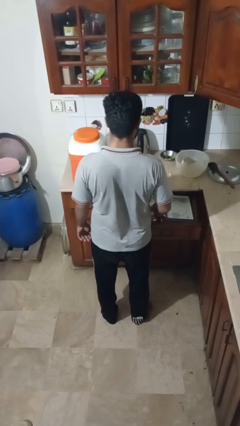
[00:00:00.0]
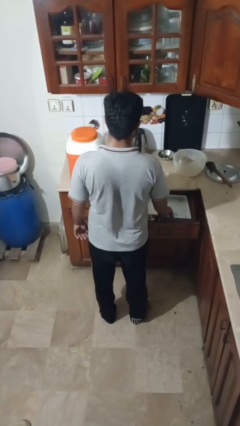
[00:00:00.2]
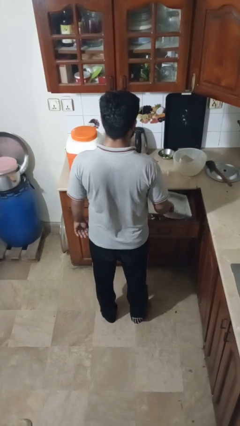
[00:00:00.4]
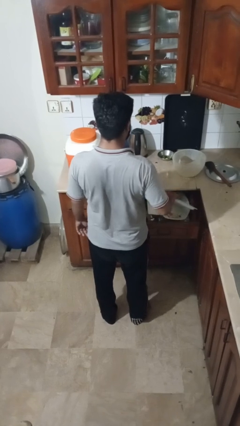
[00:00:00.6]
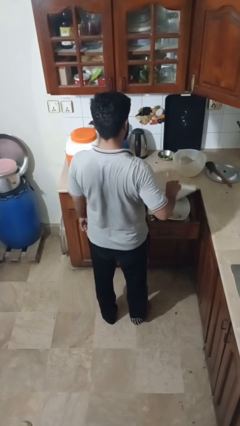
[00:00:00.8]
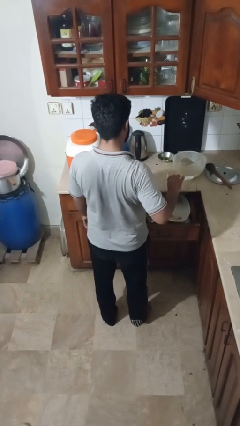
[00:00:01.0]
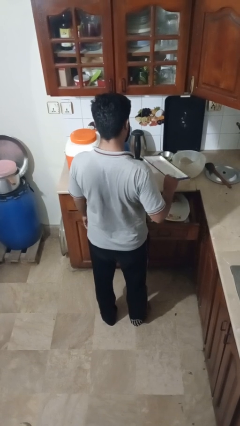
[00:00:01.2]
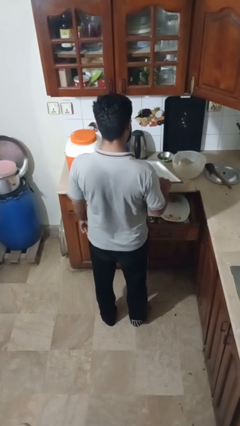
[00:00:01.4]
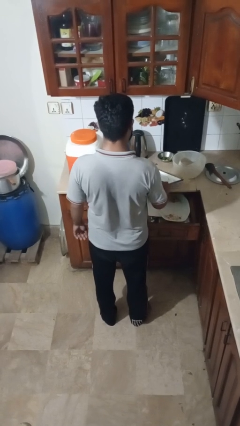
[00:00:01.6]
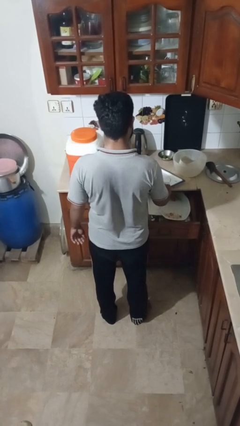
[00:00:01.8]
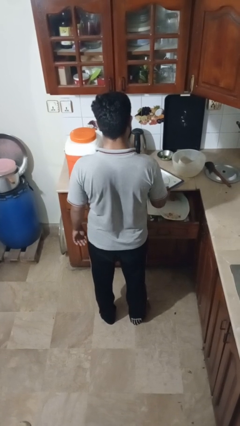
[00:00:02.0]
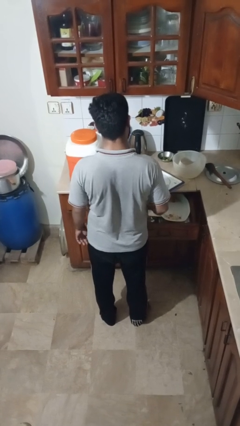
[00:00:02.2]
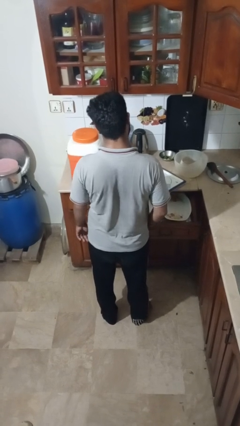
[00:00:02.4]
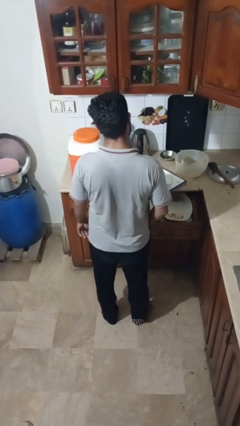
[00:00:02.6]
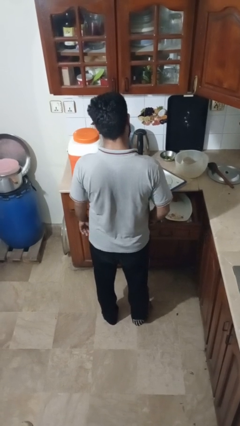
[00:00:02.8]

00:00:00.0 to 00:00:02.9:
person takes object from kitchen drawer

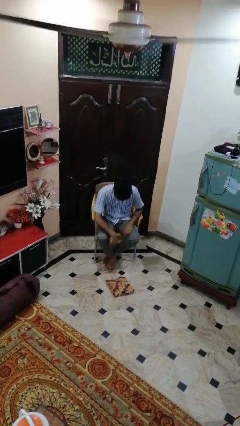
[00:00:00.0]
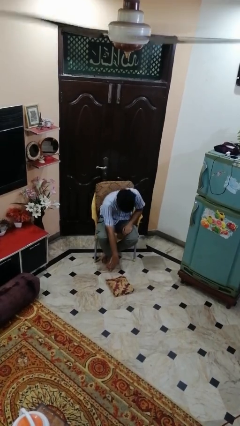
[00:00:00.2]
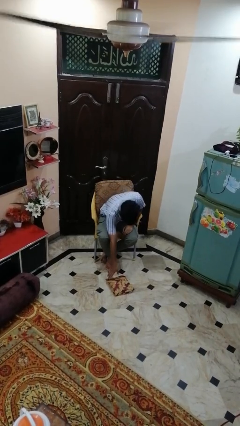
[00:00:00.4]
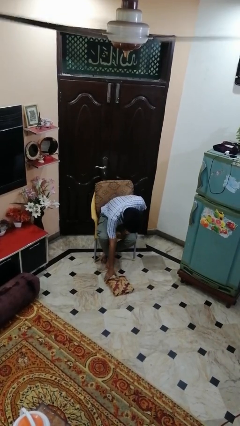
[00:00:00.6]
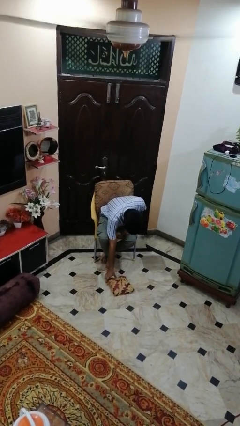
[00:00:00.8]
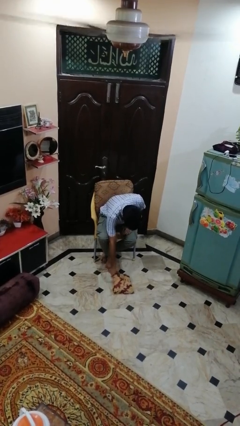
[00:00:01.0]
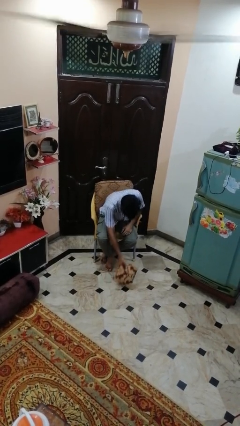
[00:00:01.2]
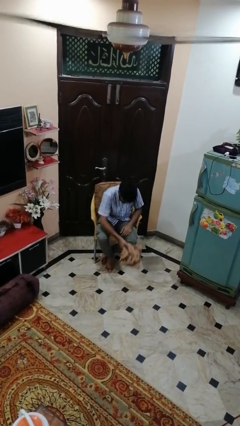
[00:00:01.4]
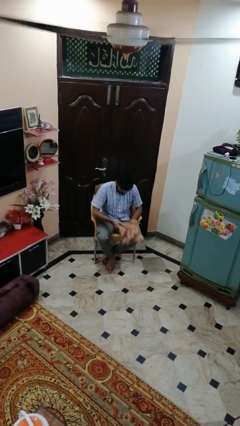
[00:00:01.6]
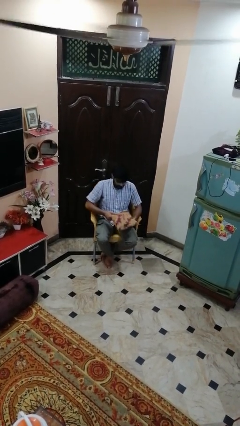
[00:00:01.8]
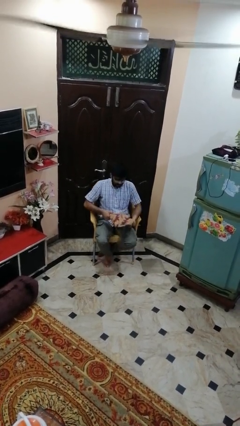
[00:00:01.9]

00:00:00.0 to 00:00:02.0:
person picks up object from floor

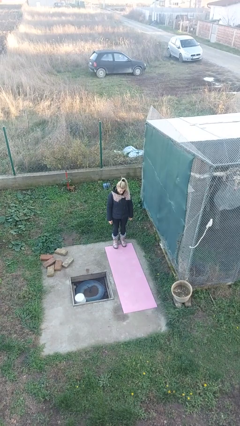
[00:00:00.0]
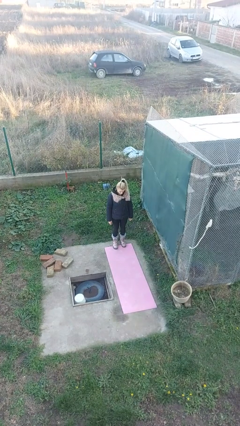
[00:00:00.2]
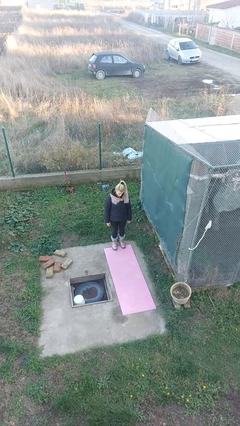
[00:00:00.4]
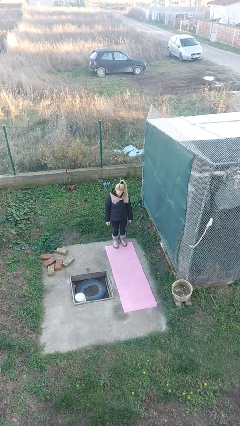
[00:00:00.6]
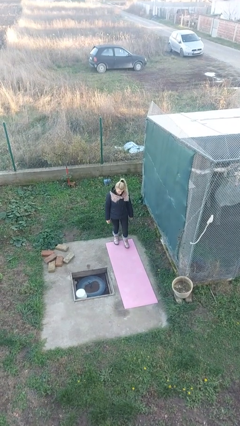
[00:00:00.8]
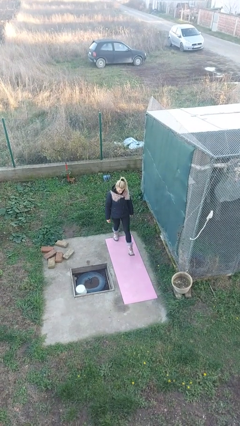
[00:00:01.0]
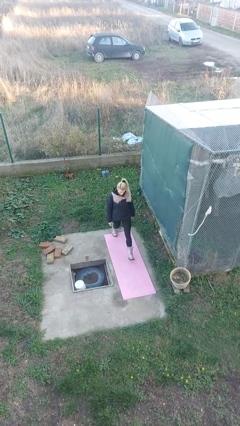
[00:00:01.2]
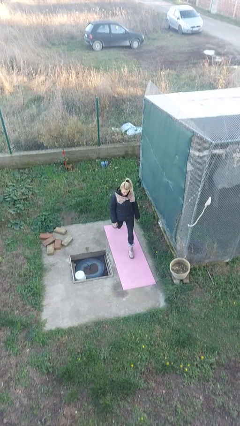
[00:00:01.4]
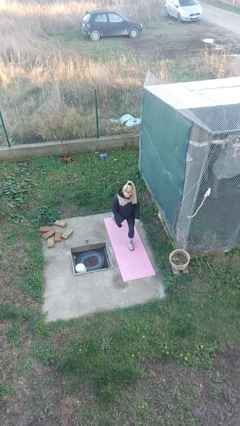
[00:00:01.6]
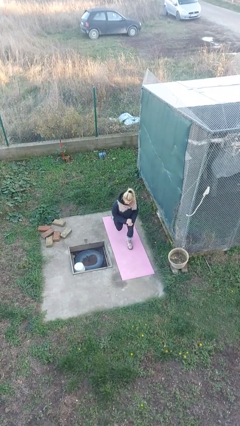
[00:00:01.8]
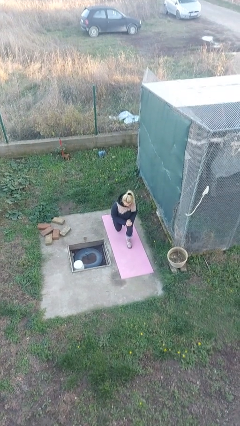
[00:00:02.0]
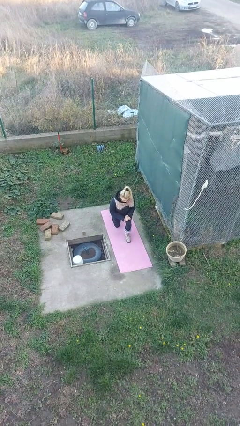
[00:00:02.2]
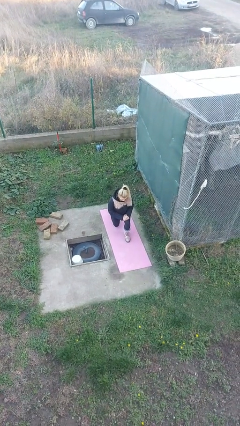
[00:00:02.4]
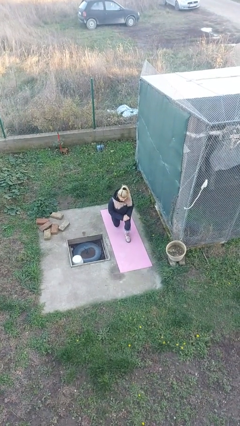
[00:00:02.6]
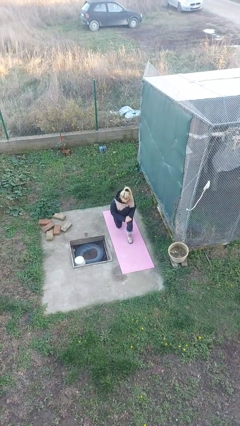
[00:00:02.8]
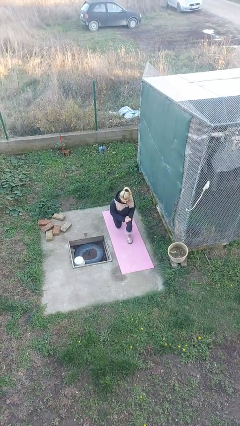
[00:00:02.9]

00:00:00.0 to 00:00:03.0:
person kneels

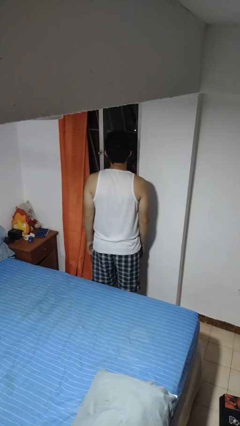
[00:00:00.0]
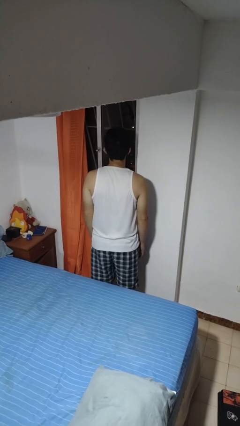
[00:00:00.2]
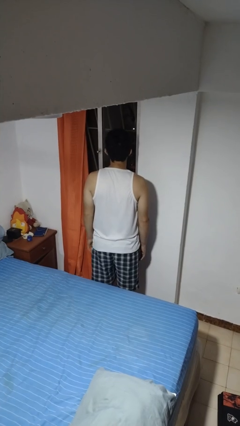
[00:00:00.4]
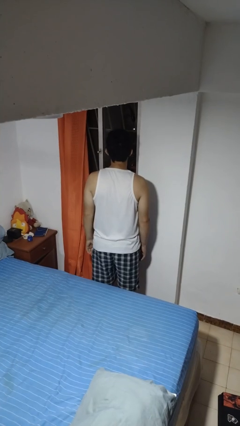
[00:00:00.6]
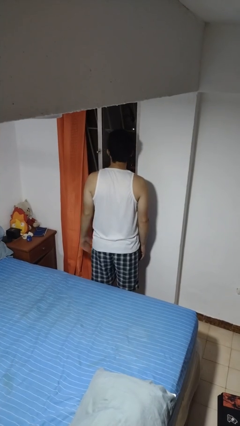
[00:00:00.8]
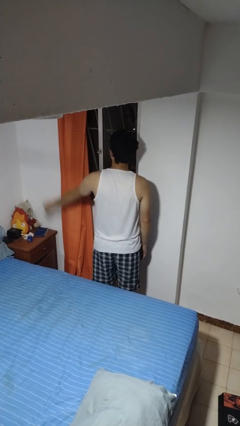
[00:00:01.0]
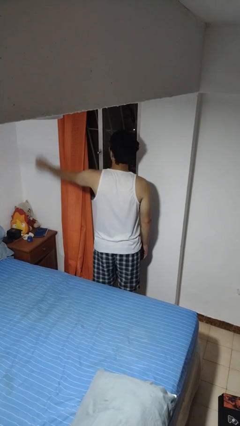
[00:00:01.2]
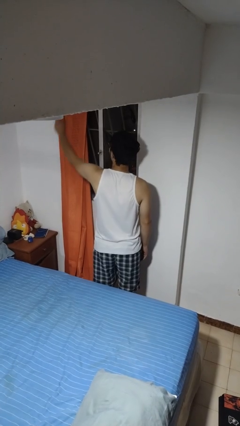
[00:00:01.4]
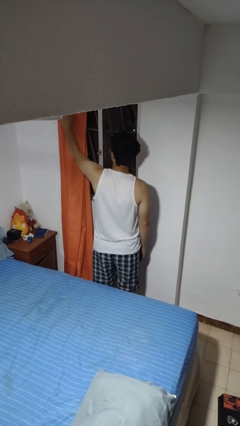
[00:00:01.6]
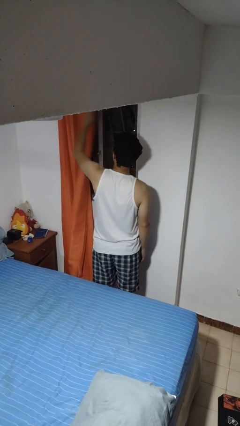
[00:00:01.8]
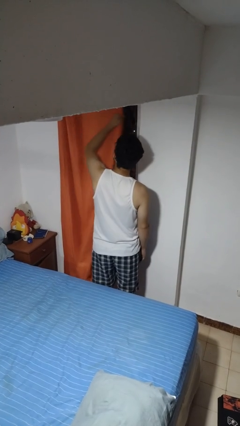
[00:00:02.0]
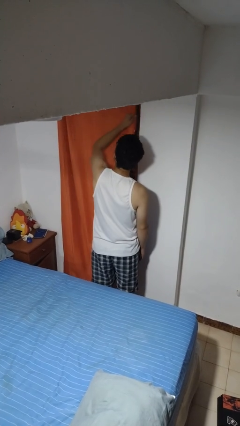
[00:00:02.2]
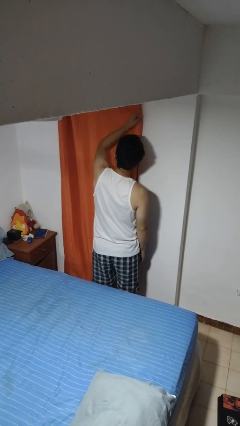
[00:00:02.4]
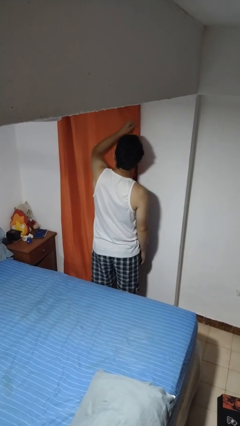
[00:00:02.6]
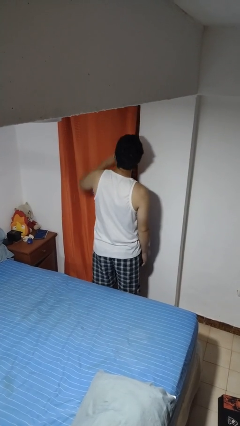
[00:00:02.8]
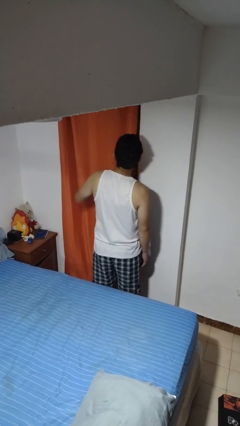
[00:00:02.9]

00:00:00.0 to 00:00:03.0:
person closes curtains

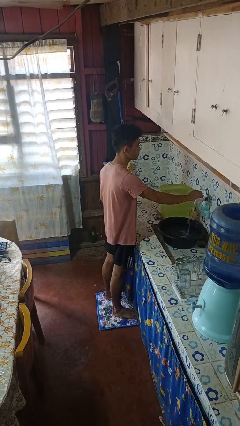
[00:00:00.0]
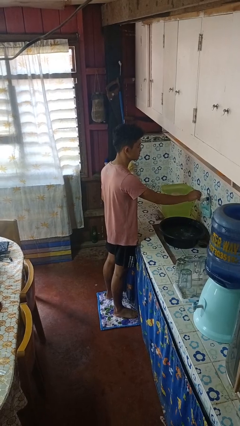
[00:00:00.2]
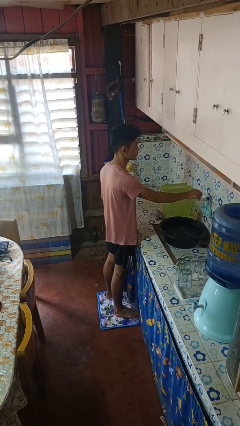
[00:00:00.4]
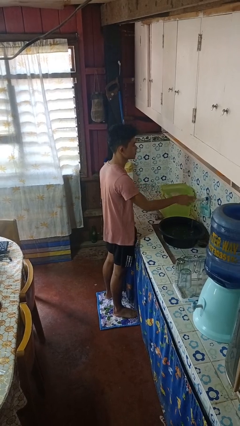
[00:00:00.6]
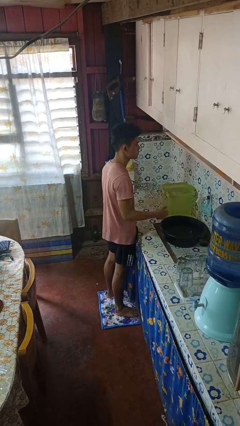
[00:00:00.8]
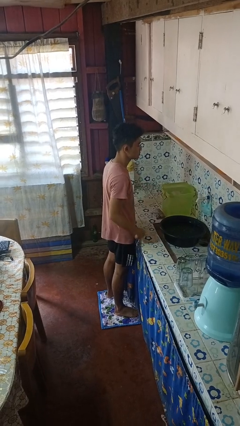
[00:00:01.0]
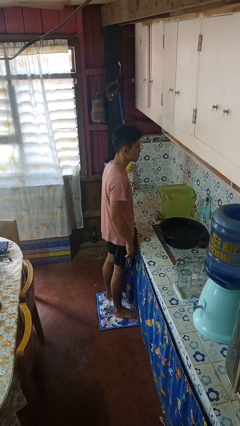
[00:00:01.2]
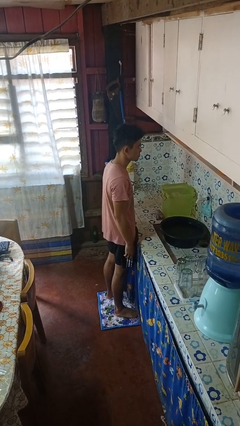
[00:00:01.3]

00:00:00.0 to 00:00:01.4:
person turns off faucet

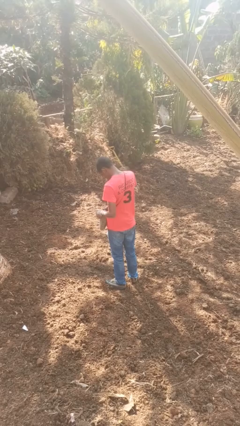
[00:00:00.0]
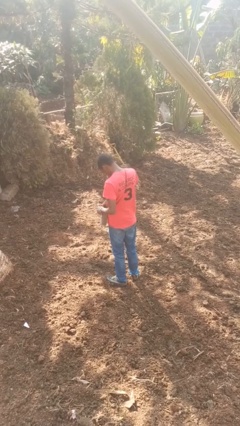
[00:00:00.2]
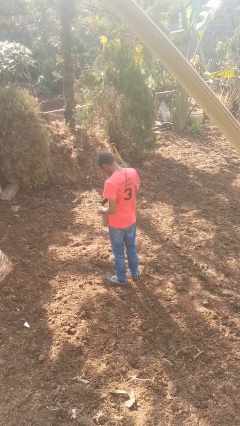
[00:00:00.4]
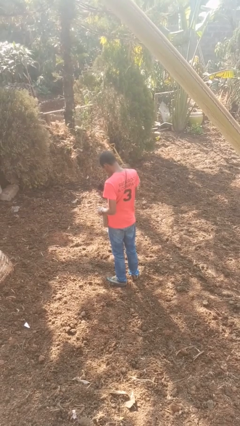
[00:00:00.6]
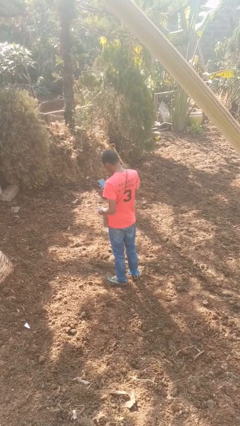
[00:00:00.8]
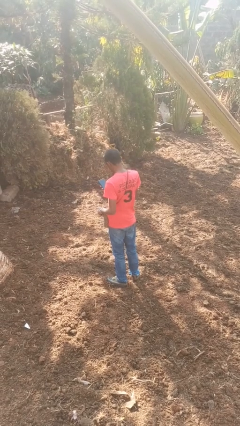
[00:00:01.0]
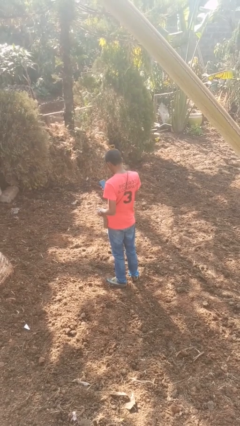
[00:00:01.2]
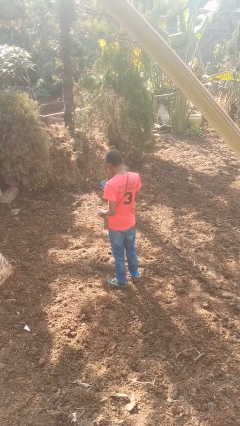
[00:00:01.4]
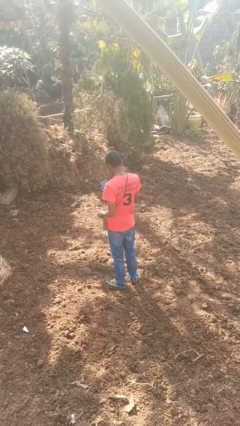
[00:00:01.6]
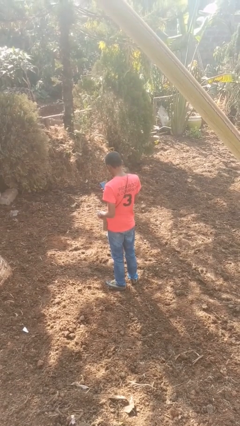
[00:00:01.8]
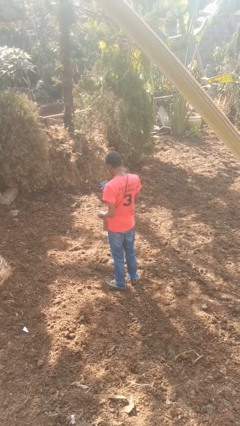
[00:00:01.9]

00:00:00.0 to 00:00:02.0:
person takes object from purse

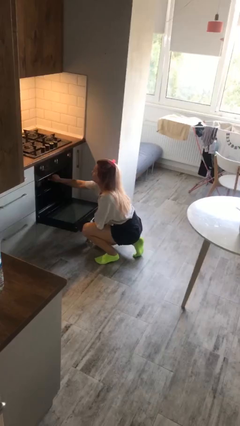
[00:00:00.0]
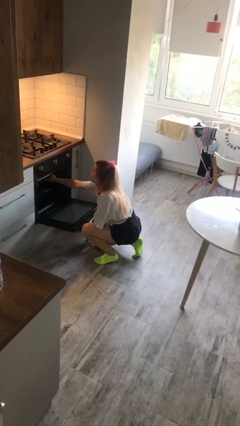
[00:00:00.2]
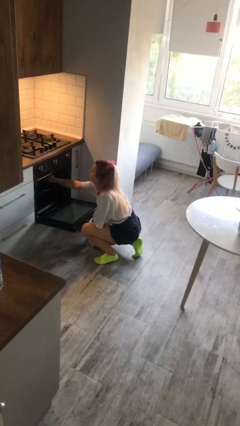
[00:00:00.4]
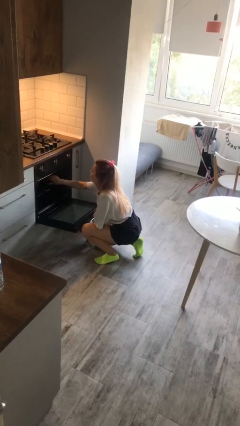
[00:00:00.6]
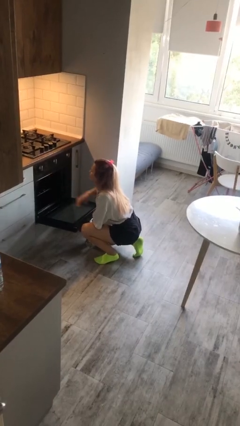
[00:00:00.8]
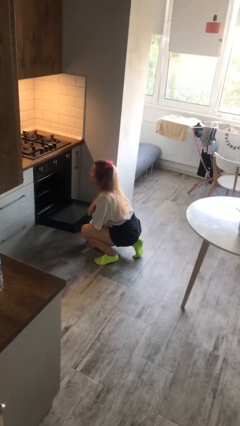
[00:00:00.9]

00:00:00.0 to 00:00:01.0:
person puts object into oven

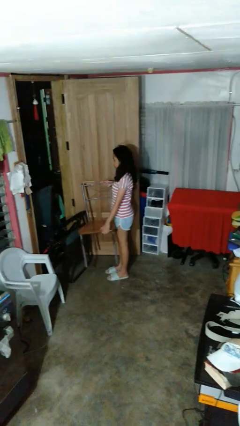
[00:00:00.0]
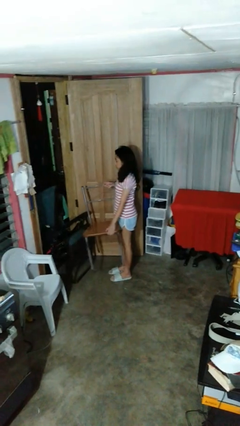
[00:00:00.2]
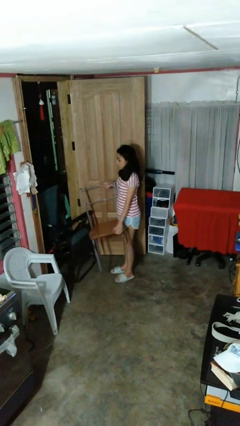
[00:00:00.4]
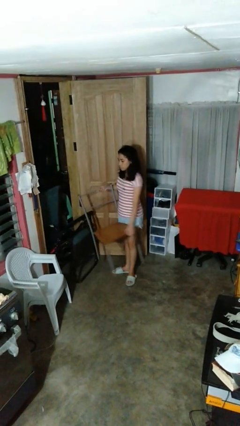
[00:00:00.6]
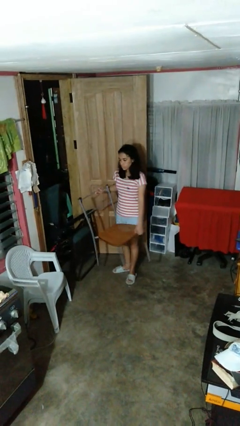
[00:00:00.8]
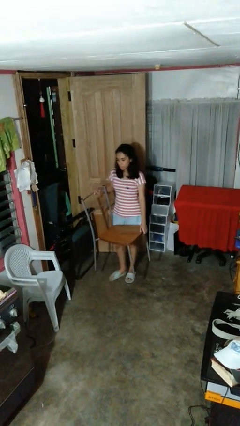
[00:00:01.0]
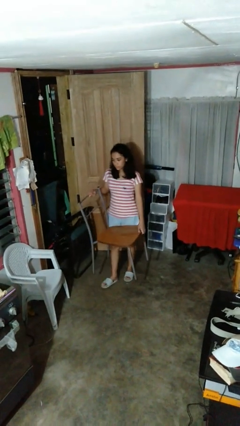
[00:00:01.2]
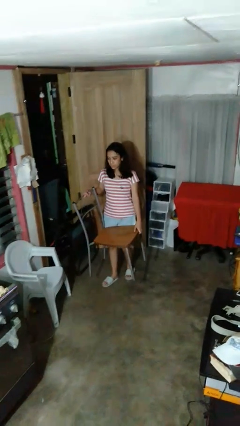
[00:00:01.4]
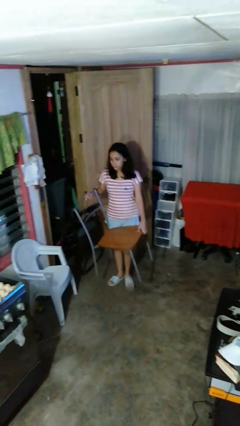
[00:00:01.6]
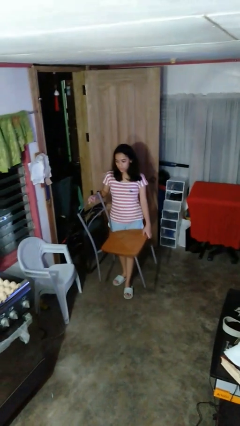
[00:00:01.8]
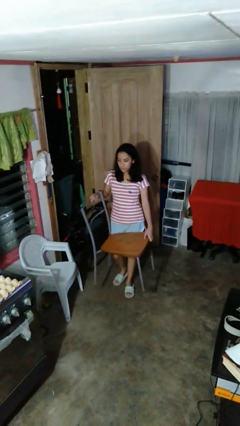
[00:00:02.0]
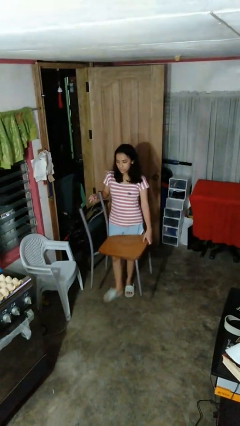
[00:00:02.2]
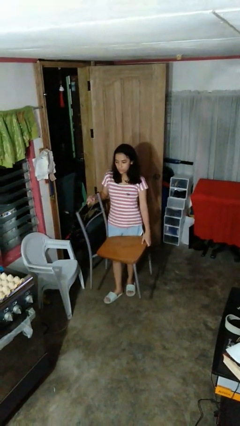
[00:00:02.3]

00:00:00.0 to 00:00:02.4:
person carries furniture
